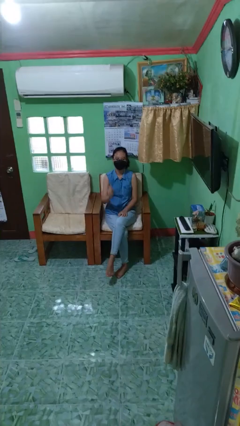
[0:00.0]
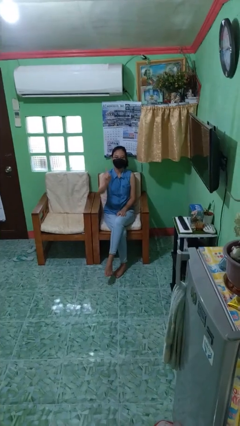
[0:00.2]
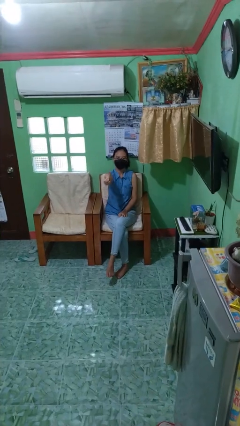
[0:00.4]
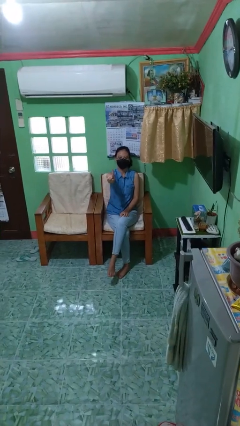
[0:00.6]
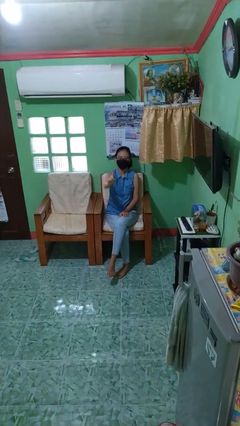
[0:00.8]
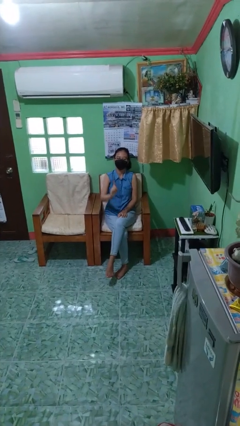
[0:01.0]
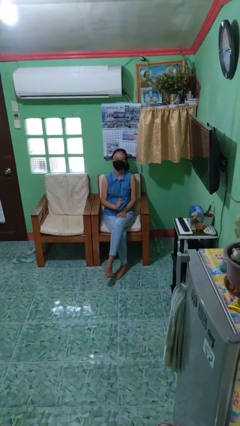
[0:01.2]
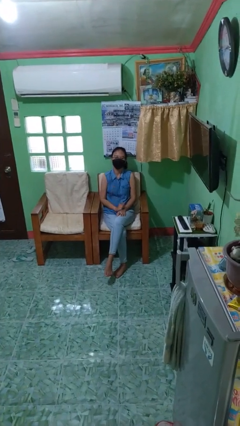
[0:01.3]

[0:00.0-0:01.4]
person gestures number one

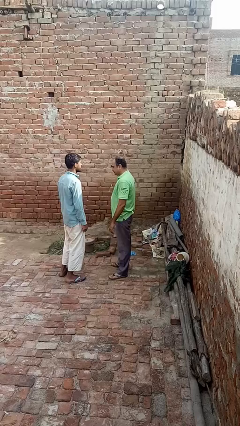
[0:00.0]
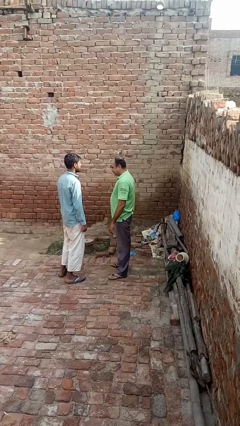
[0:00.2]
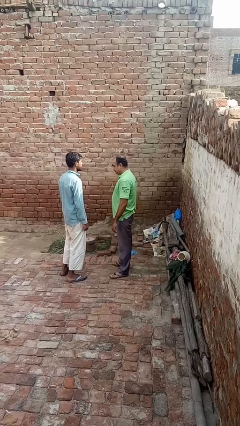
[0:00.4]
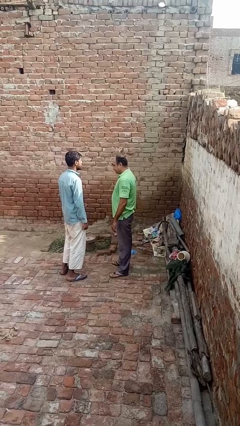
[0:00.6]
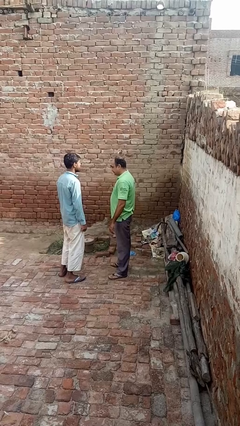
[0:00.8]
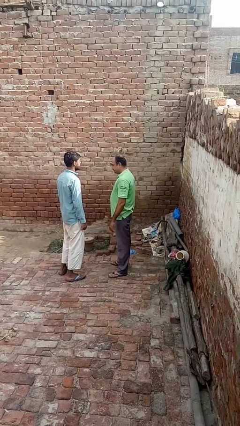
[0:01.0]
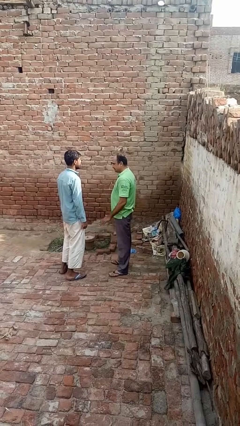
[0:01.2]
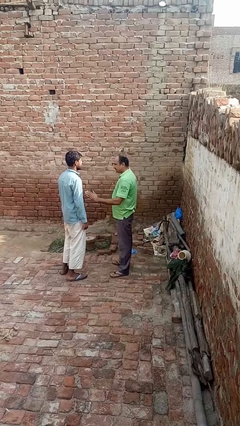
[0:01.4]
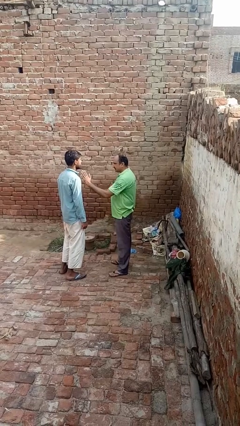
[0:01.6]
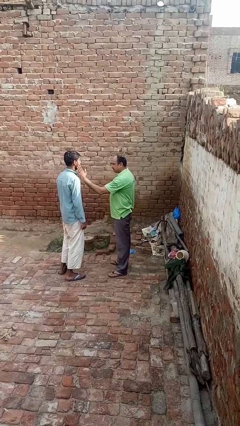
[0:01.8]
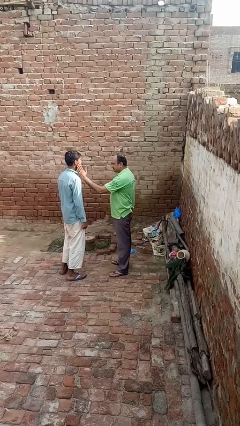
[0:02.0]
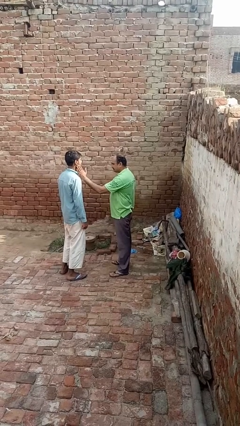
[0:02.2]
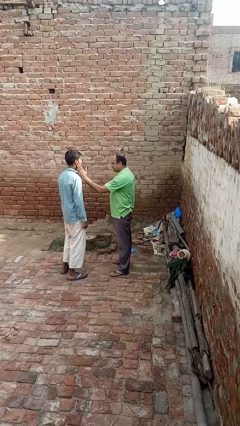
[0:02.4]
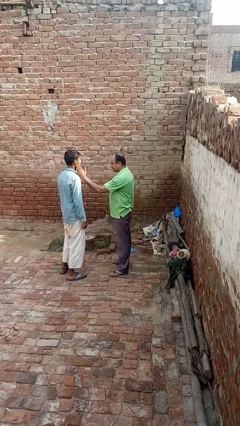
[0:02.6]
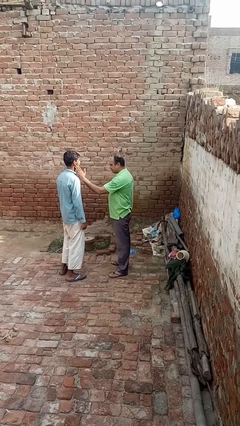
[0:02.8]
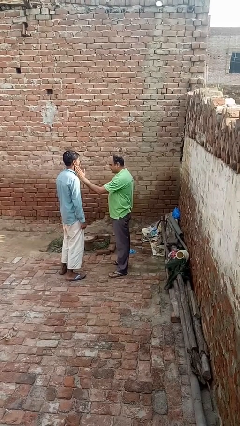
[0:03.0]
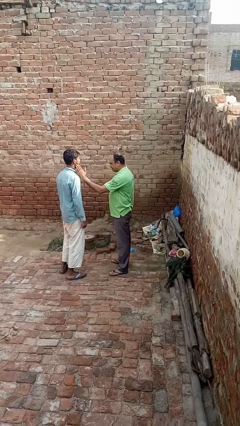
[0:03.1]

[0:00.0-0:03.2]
person touches face of person

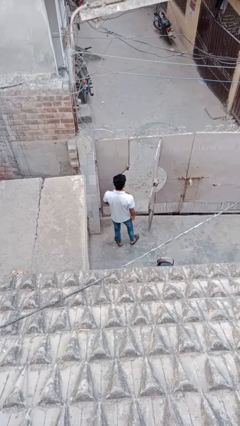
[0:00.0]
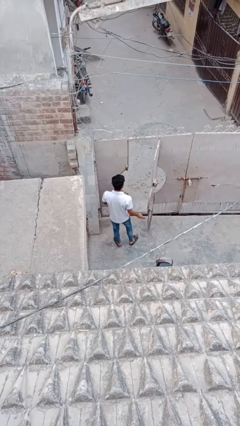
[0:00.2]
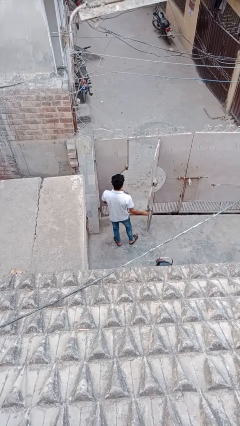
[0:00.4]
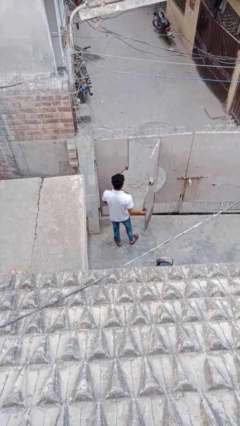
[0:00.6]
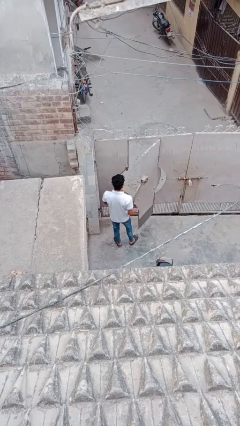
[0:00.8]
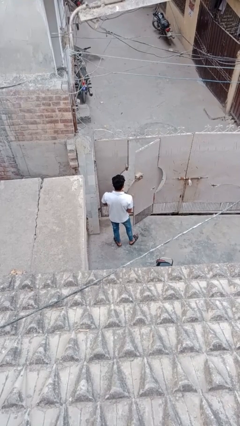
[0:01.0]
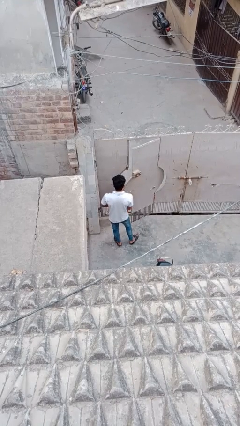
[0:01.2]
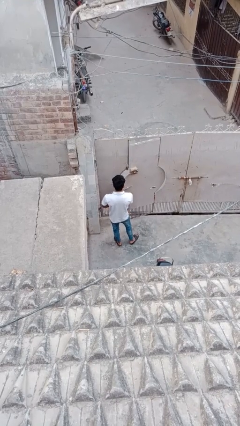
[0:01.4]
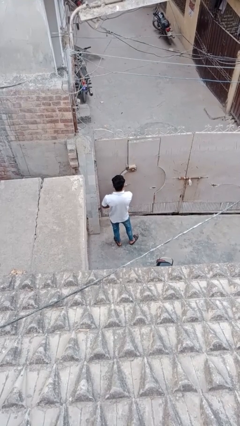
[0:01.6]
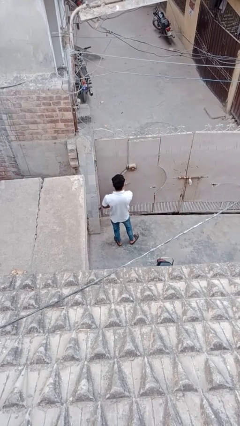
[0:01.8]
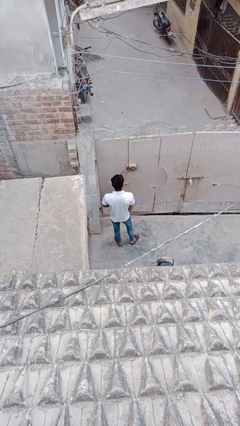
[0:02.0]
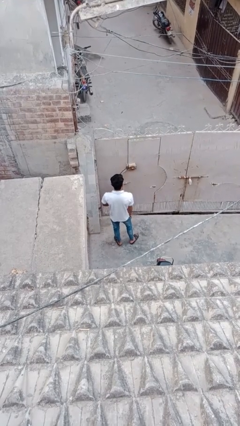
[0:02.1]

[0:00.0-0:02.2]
person closes facility door

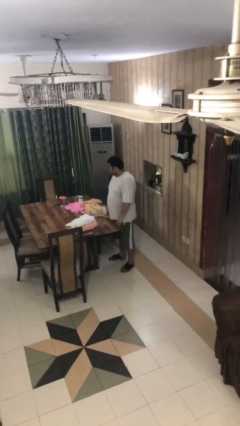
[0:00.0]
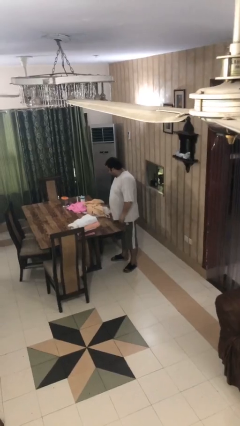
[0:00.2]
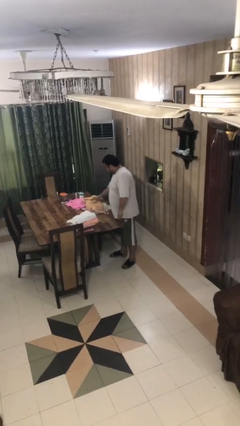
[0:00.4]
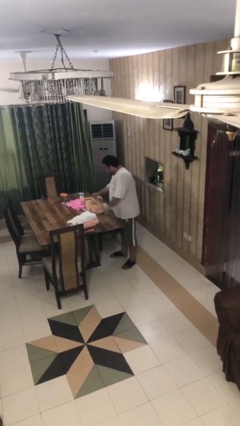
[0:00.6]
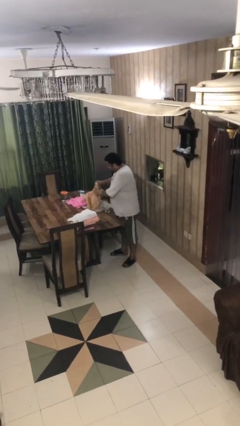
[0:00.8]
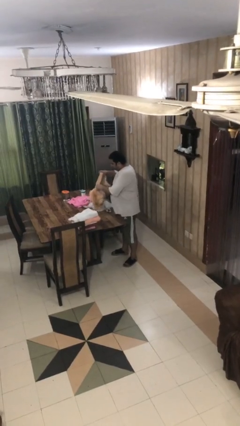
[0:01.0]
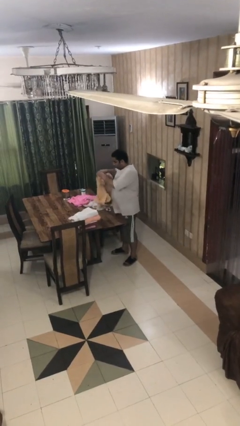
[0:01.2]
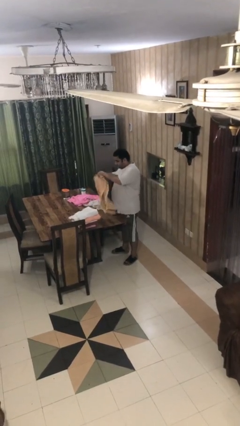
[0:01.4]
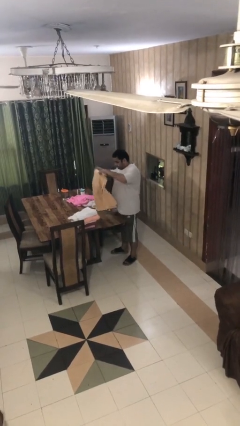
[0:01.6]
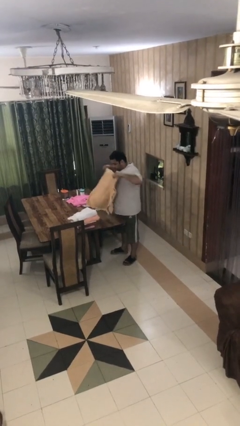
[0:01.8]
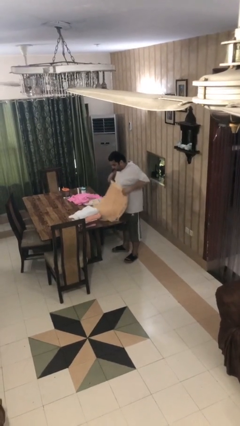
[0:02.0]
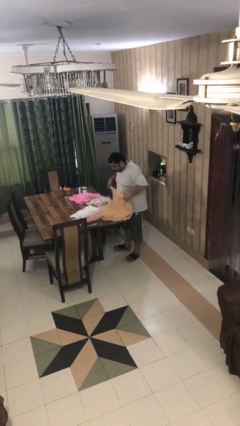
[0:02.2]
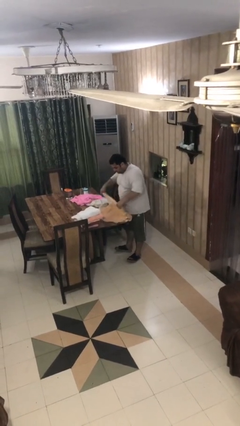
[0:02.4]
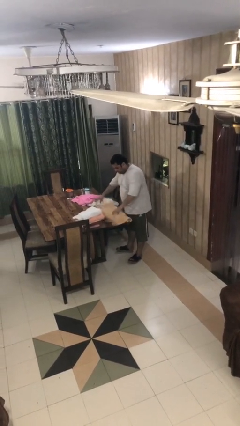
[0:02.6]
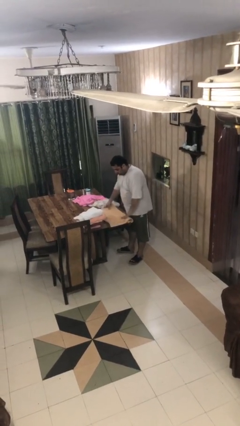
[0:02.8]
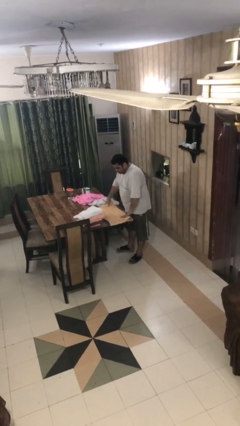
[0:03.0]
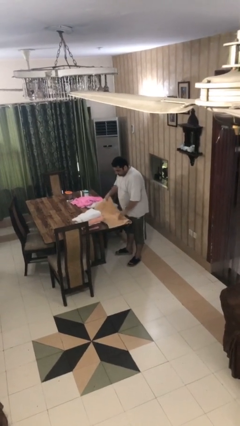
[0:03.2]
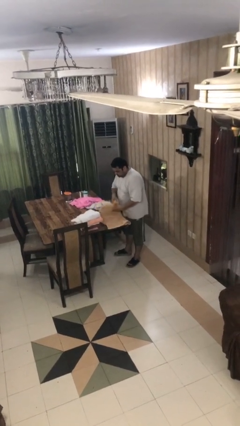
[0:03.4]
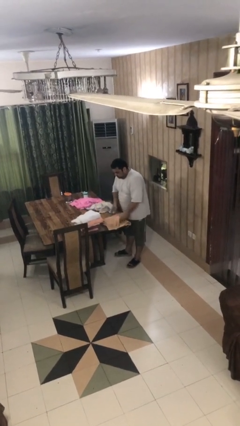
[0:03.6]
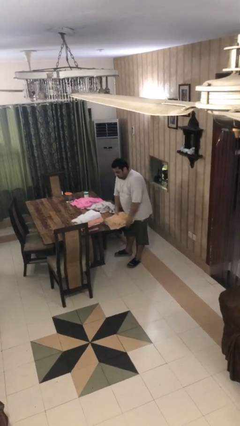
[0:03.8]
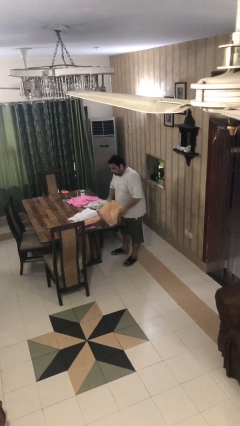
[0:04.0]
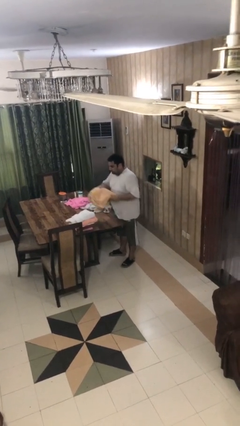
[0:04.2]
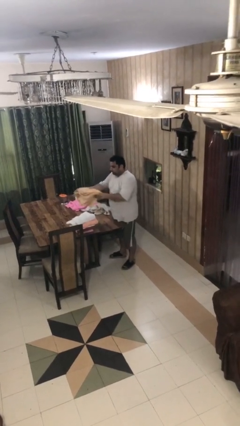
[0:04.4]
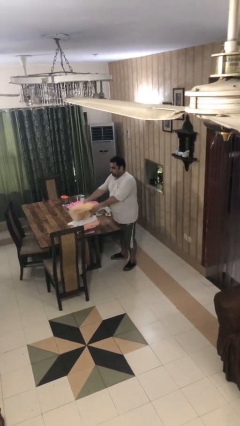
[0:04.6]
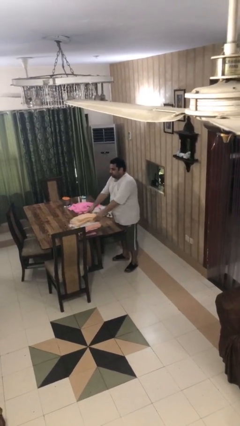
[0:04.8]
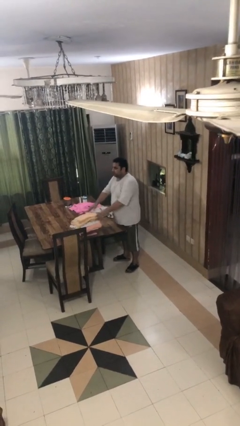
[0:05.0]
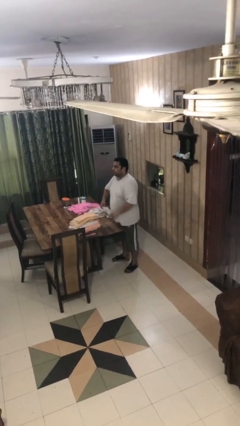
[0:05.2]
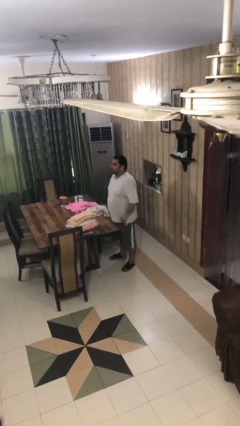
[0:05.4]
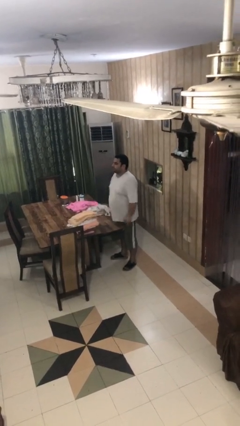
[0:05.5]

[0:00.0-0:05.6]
person folds towel

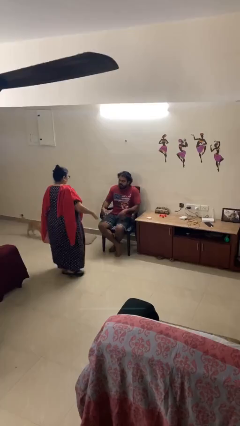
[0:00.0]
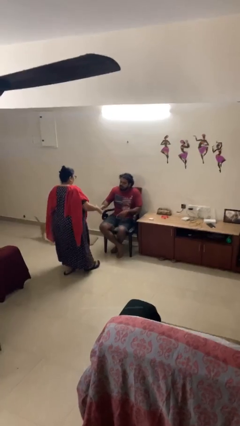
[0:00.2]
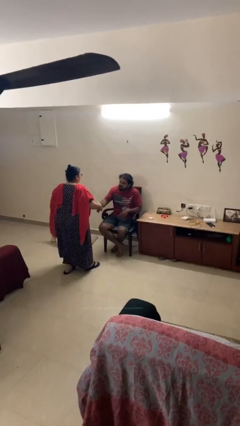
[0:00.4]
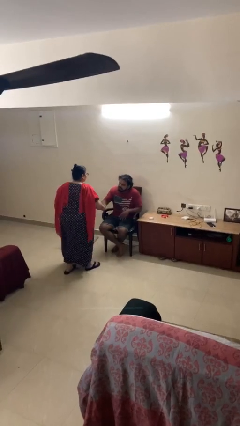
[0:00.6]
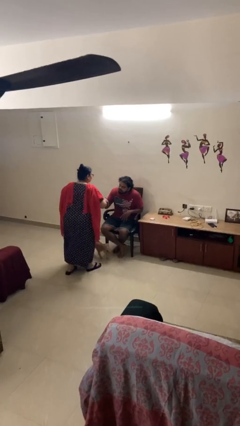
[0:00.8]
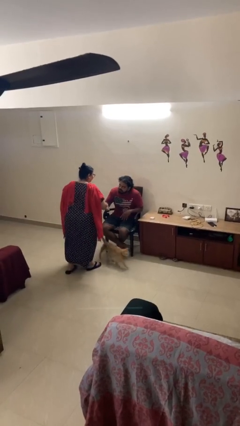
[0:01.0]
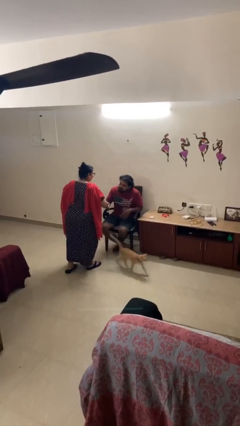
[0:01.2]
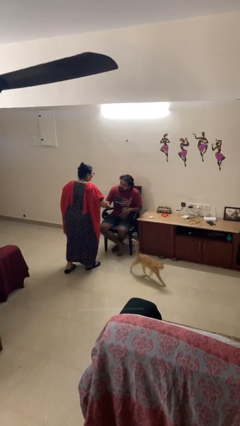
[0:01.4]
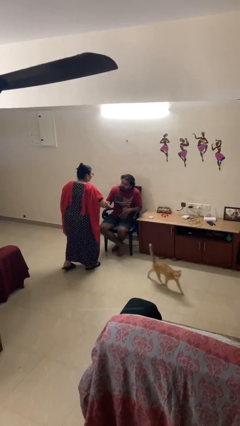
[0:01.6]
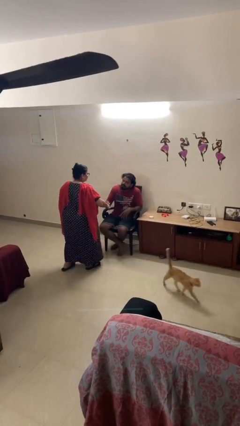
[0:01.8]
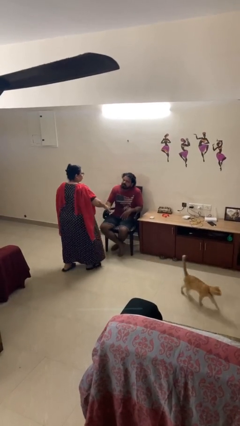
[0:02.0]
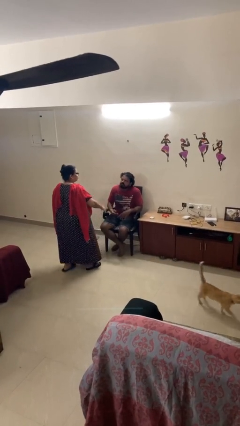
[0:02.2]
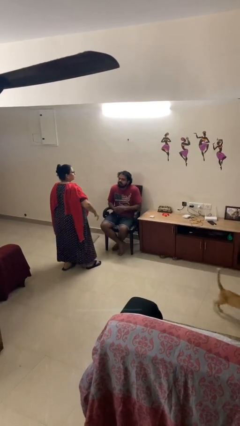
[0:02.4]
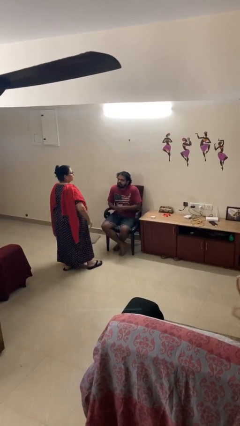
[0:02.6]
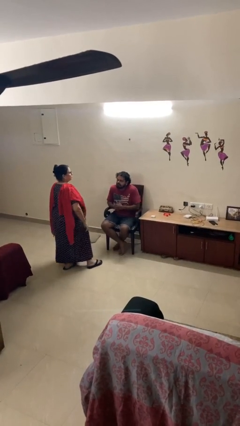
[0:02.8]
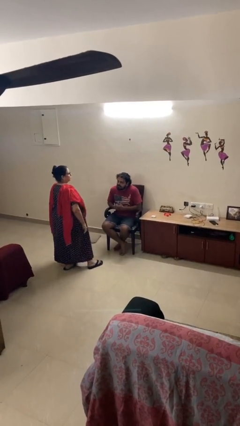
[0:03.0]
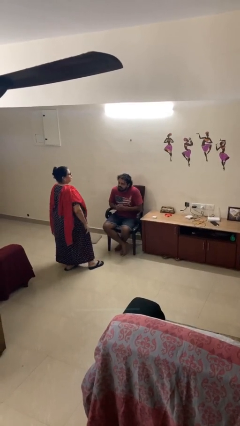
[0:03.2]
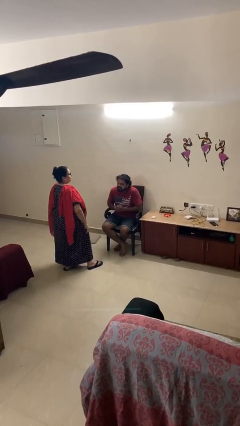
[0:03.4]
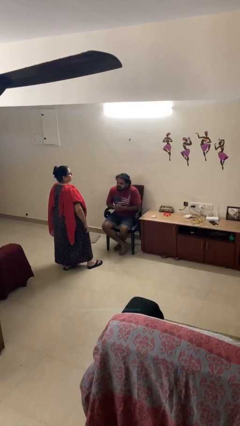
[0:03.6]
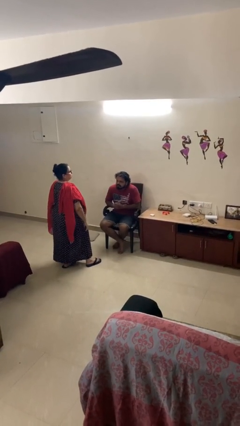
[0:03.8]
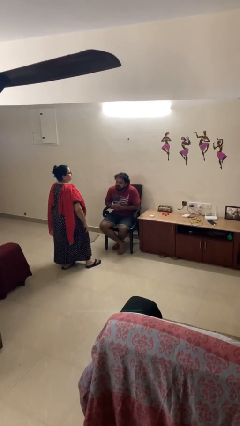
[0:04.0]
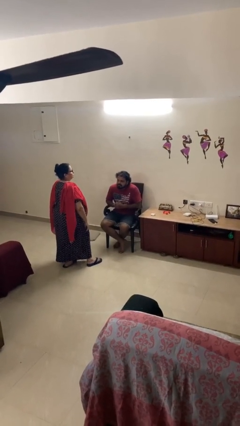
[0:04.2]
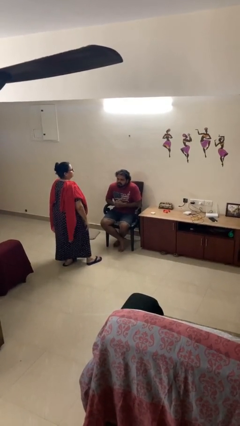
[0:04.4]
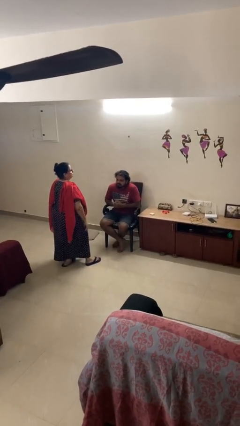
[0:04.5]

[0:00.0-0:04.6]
person shakes hand

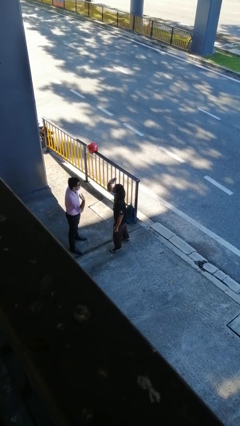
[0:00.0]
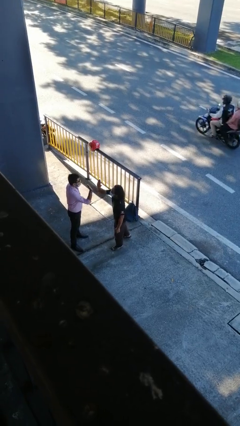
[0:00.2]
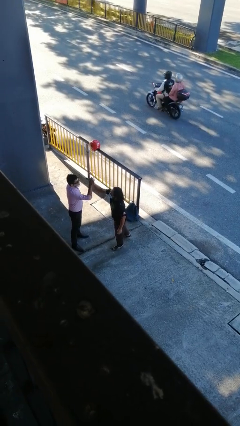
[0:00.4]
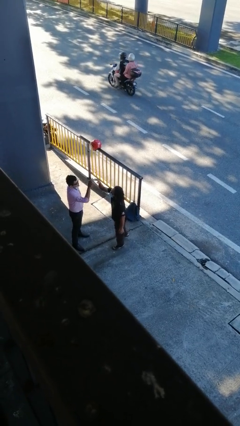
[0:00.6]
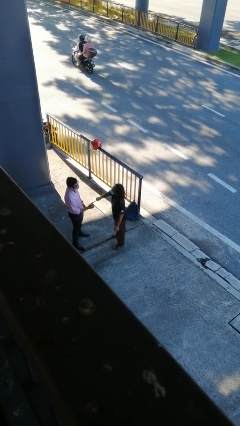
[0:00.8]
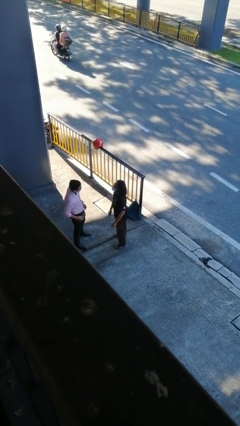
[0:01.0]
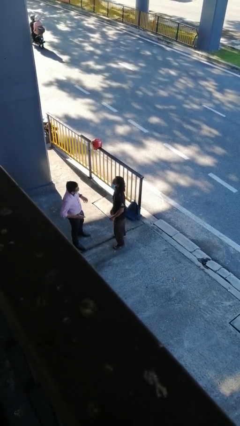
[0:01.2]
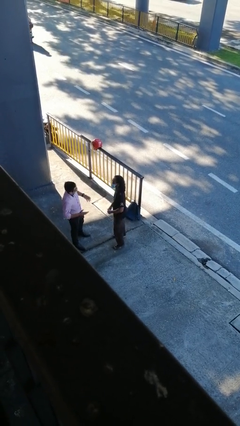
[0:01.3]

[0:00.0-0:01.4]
person highfives hand
